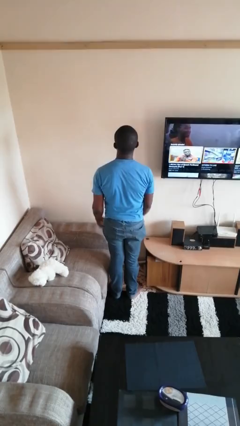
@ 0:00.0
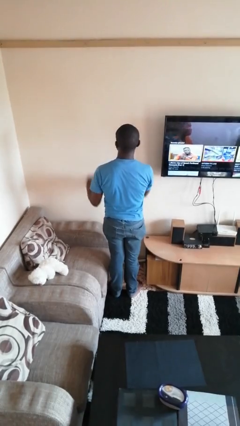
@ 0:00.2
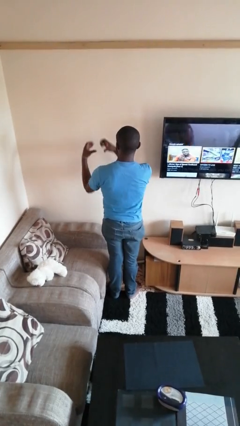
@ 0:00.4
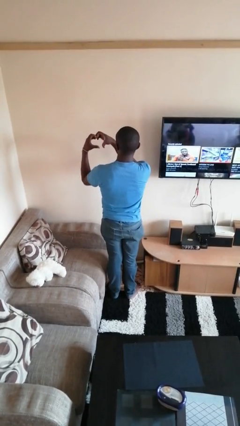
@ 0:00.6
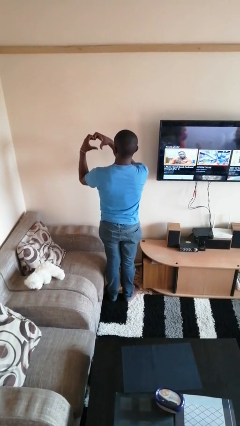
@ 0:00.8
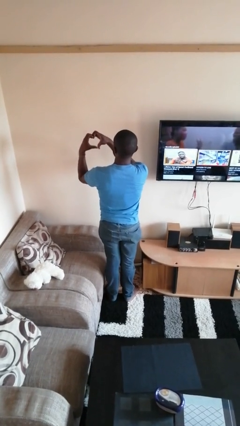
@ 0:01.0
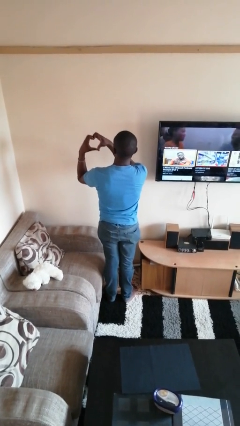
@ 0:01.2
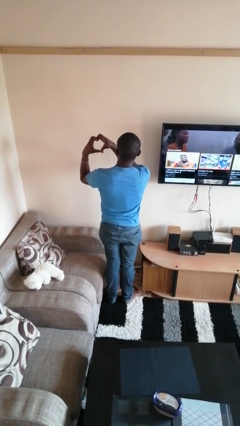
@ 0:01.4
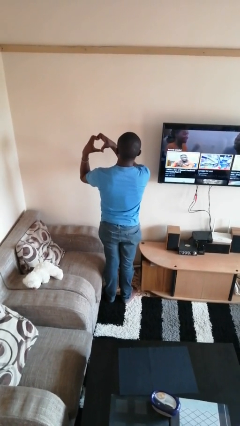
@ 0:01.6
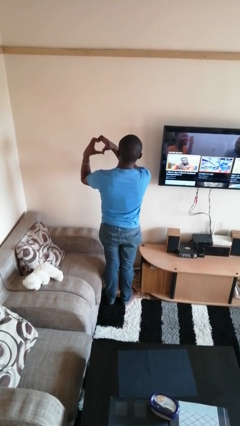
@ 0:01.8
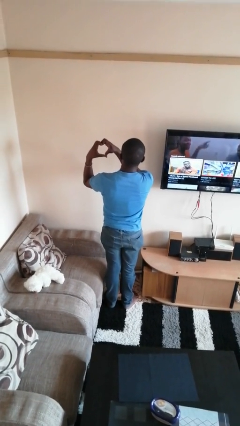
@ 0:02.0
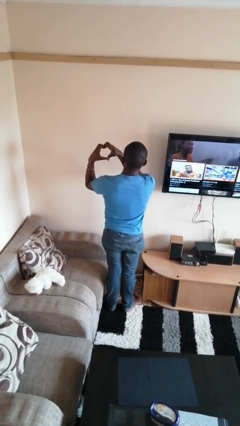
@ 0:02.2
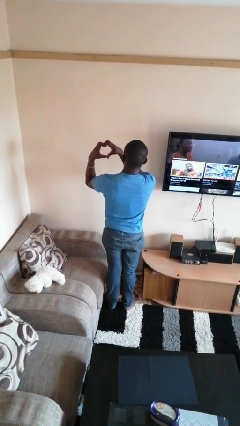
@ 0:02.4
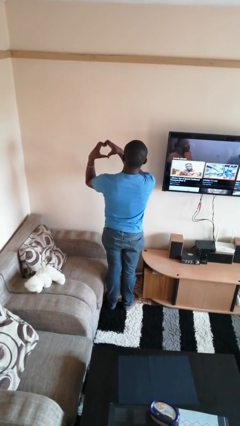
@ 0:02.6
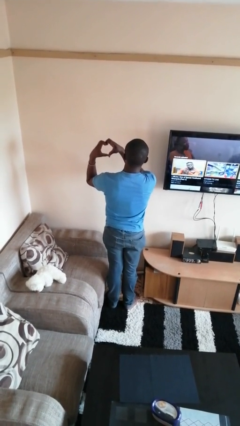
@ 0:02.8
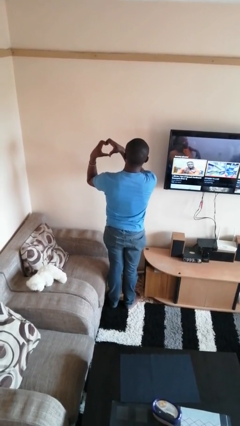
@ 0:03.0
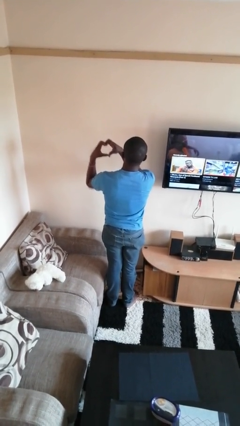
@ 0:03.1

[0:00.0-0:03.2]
person gestures heart

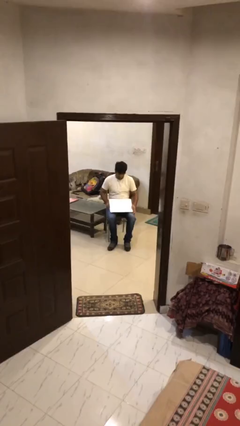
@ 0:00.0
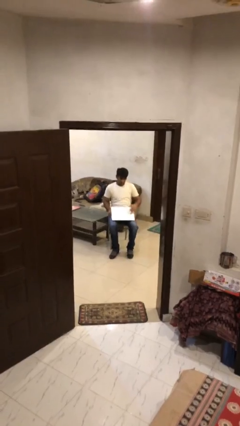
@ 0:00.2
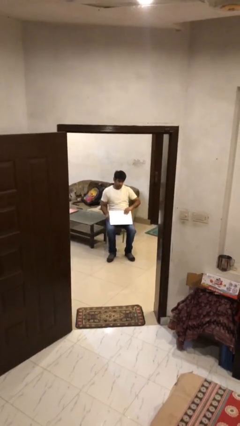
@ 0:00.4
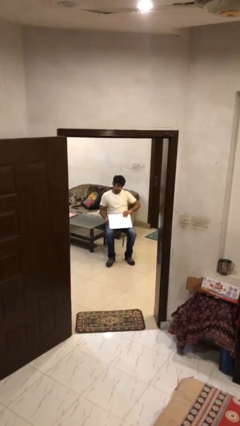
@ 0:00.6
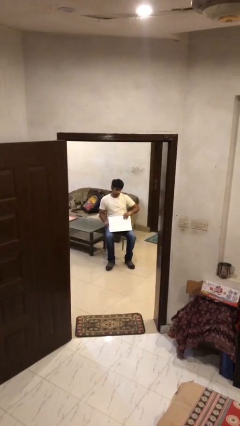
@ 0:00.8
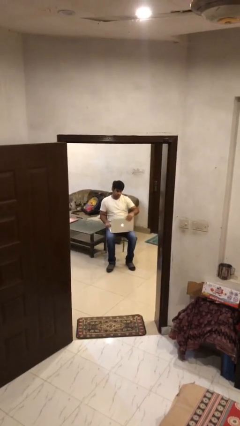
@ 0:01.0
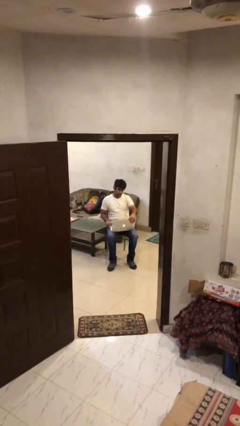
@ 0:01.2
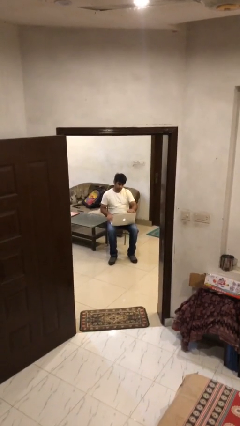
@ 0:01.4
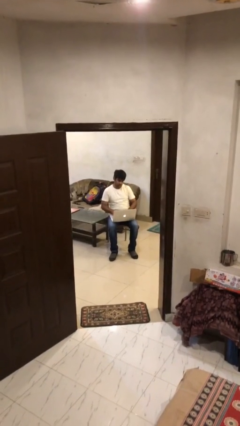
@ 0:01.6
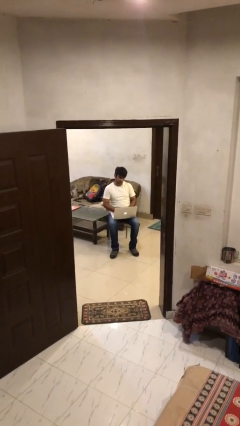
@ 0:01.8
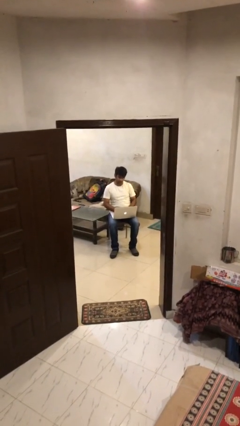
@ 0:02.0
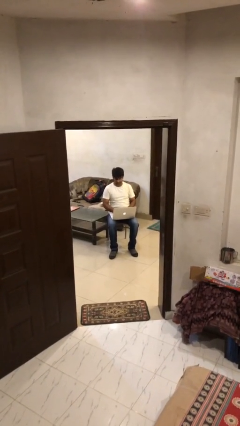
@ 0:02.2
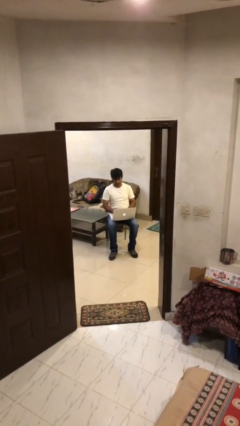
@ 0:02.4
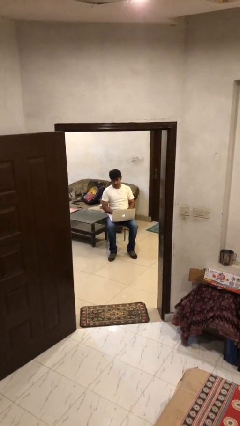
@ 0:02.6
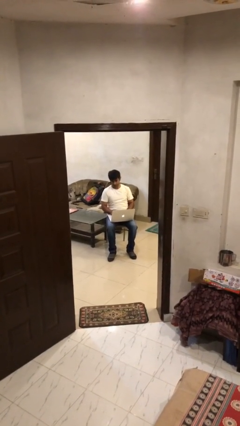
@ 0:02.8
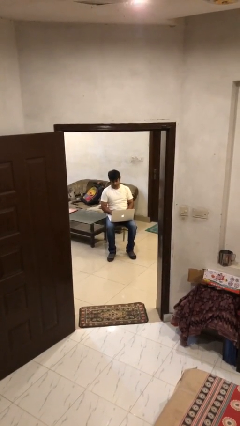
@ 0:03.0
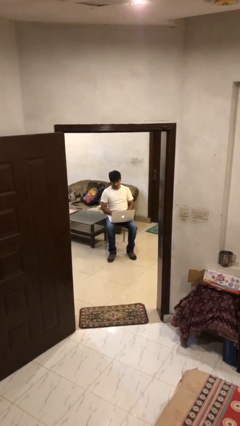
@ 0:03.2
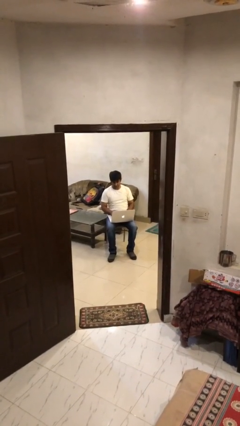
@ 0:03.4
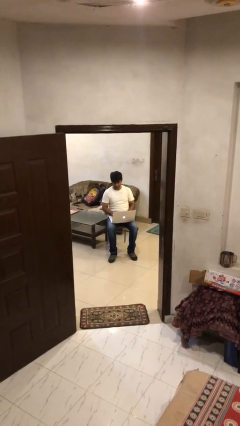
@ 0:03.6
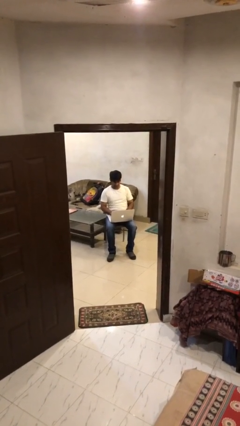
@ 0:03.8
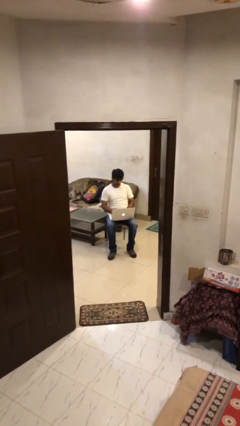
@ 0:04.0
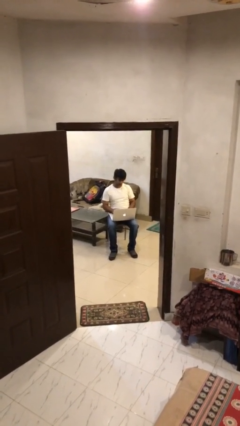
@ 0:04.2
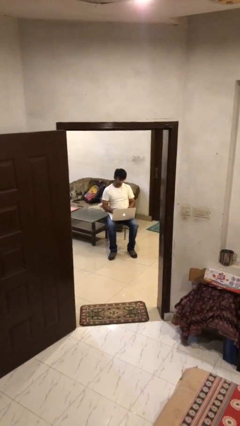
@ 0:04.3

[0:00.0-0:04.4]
person interacts with laptop

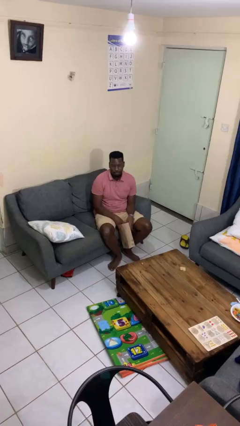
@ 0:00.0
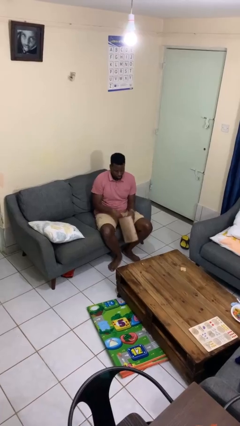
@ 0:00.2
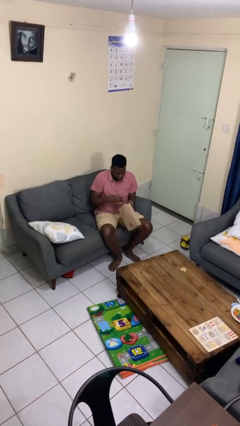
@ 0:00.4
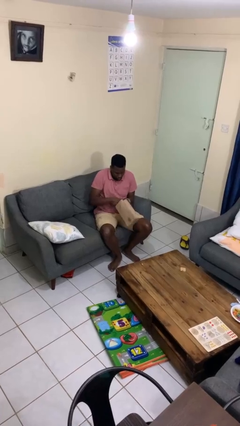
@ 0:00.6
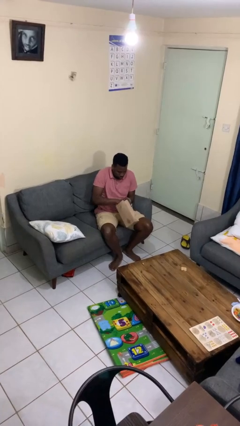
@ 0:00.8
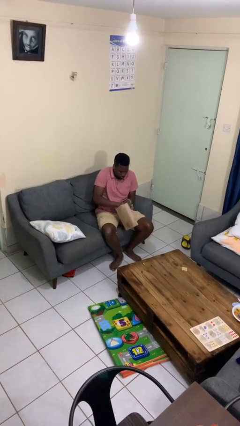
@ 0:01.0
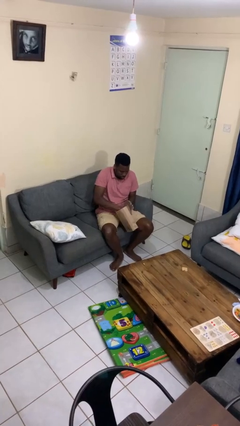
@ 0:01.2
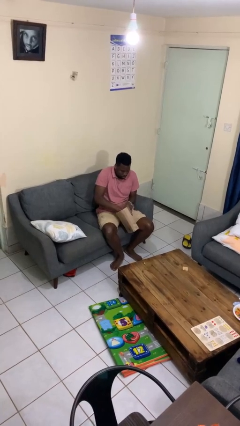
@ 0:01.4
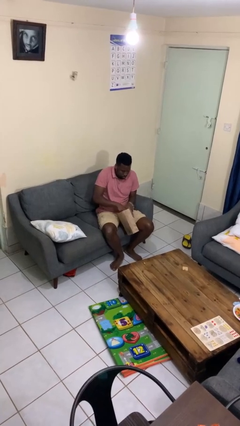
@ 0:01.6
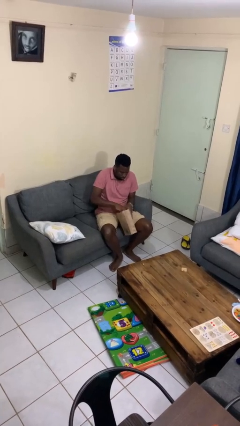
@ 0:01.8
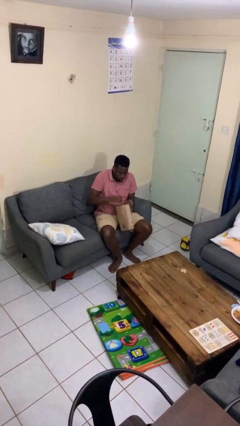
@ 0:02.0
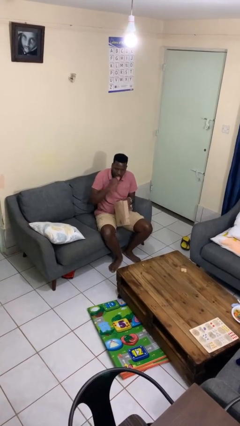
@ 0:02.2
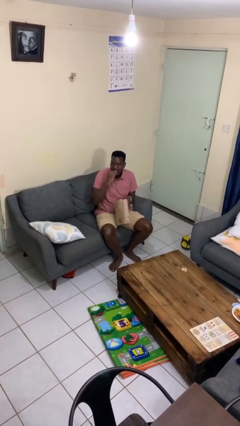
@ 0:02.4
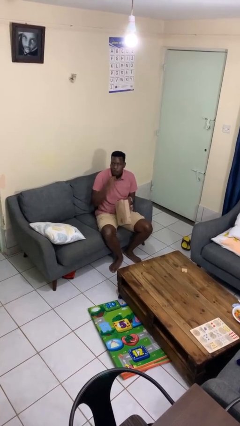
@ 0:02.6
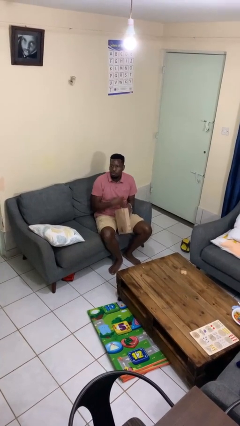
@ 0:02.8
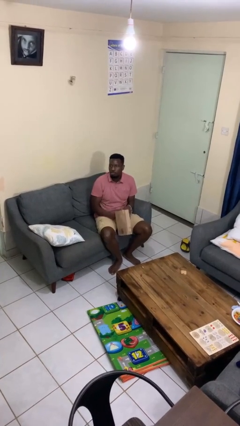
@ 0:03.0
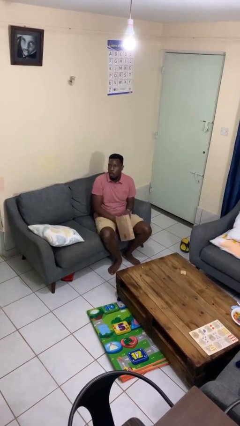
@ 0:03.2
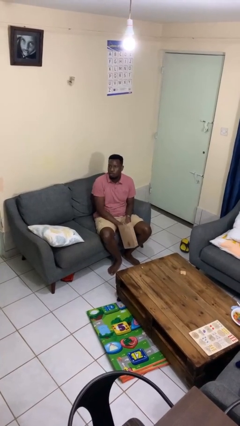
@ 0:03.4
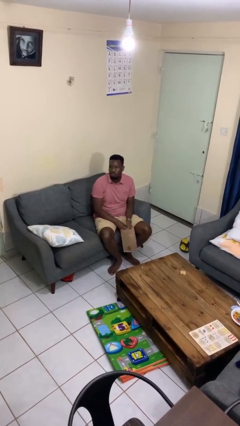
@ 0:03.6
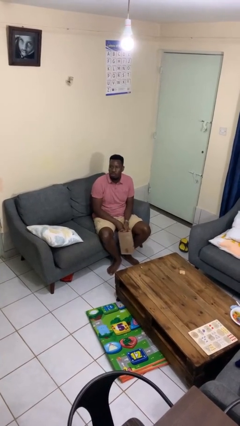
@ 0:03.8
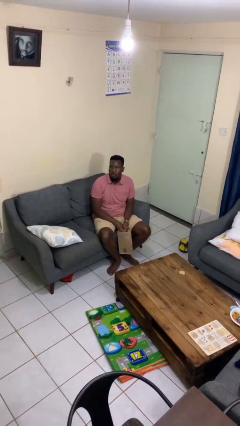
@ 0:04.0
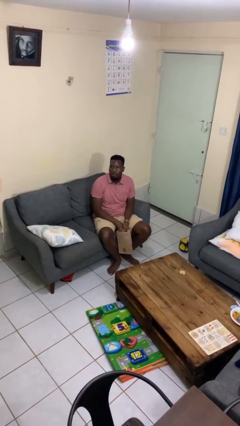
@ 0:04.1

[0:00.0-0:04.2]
person eats snack from bag

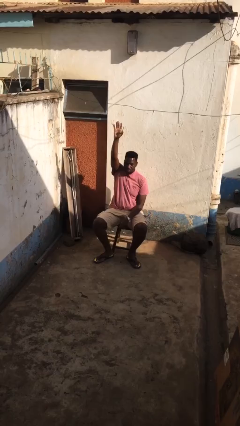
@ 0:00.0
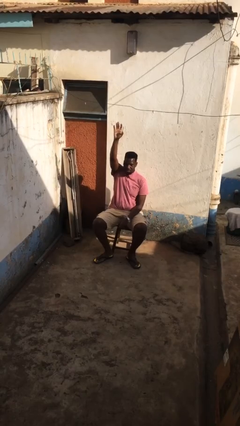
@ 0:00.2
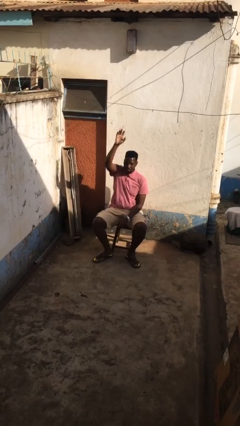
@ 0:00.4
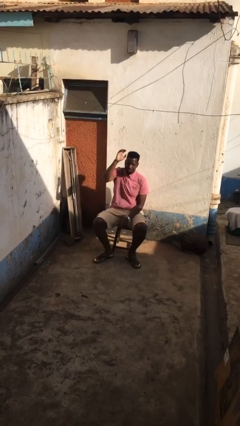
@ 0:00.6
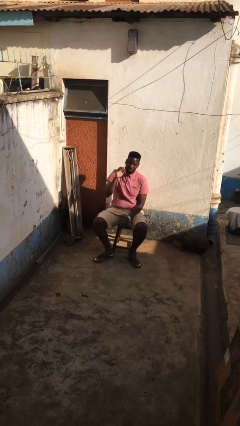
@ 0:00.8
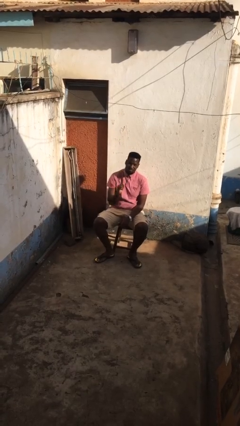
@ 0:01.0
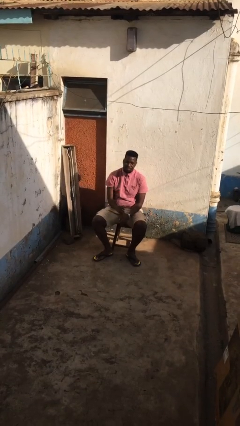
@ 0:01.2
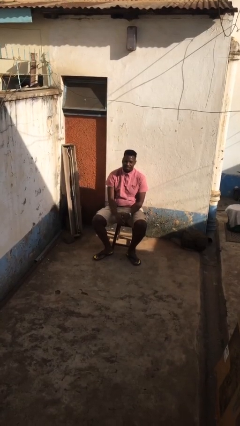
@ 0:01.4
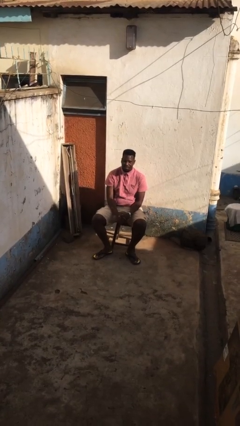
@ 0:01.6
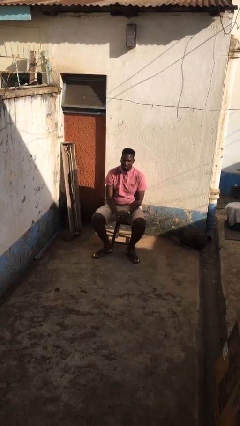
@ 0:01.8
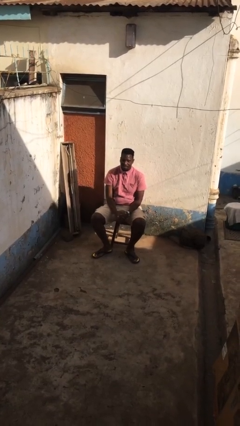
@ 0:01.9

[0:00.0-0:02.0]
person gestures lower hand

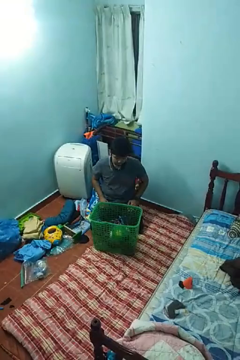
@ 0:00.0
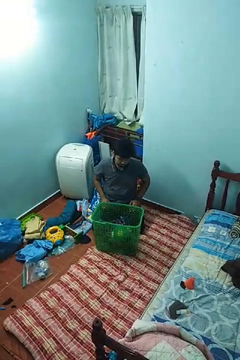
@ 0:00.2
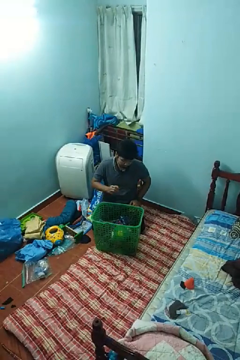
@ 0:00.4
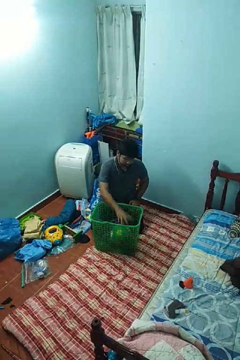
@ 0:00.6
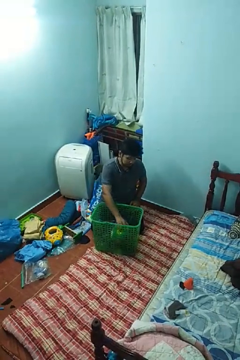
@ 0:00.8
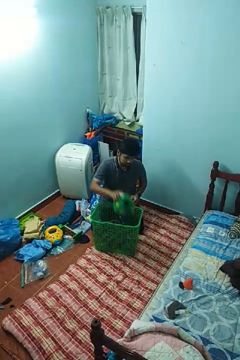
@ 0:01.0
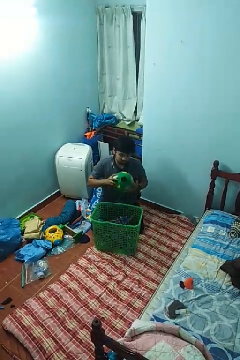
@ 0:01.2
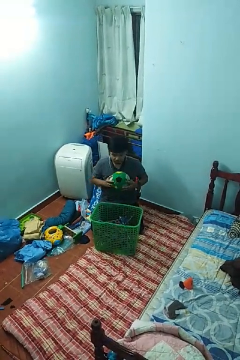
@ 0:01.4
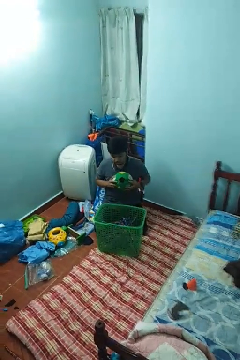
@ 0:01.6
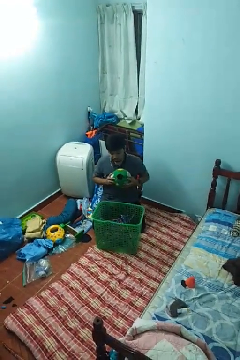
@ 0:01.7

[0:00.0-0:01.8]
person takes object from basket

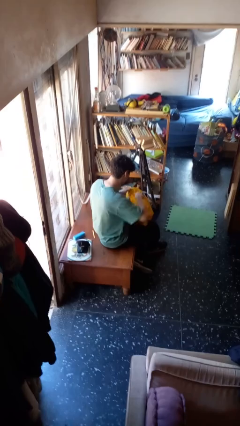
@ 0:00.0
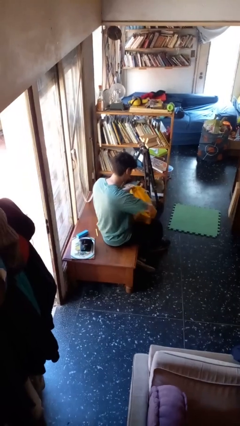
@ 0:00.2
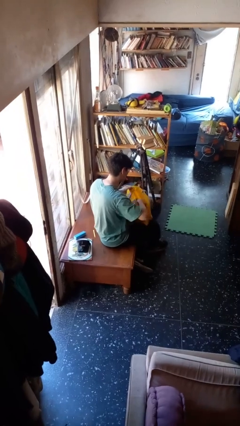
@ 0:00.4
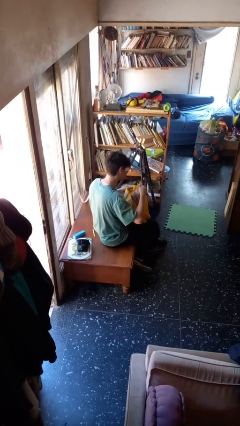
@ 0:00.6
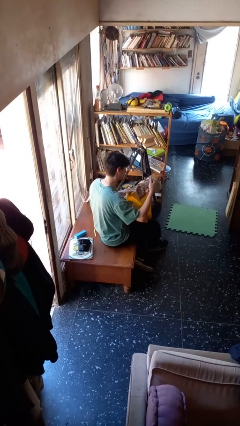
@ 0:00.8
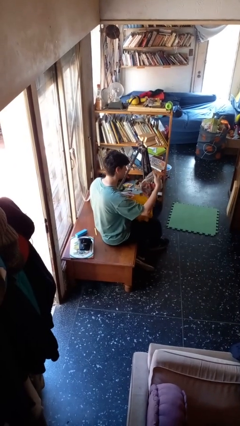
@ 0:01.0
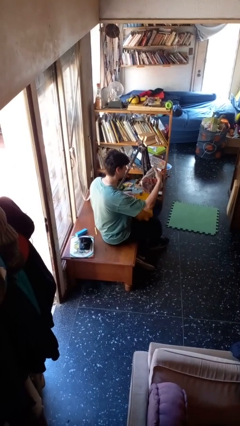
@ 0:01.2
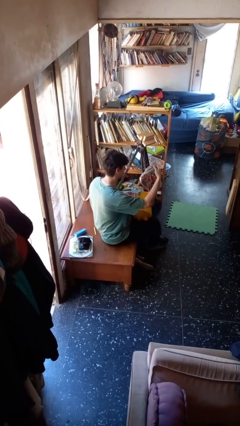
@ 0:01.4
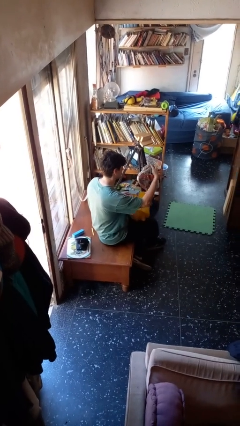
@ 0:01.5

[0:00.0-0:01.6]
person takes object from bag

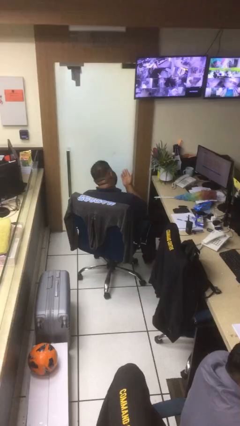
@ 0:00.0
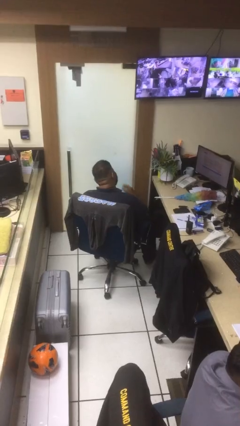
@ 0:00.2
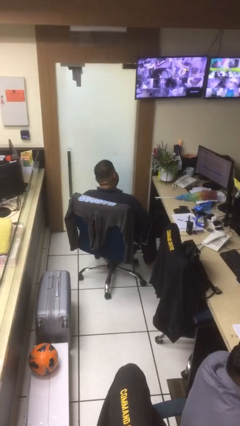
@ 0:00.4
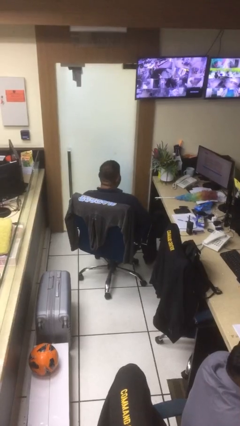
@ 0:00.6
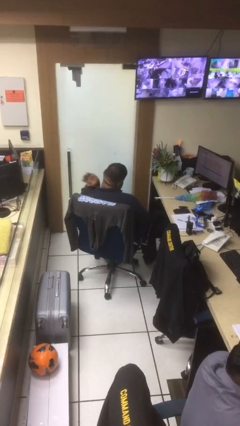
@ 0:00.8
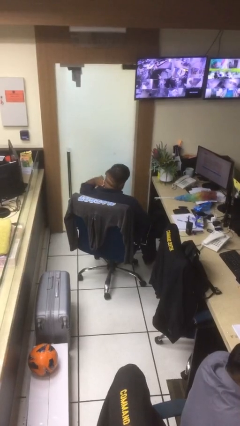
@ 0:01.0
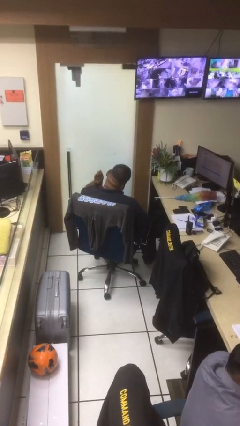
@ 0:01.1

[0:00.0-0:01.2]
person swats bug
